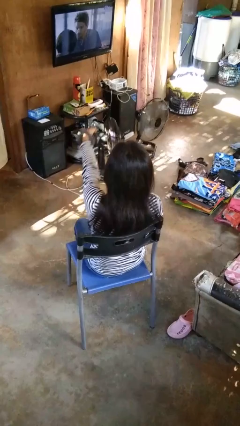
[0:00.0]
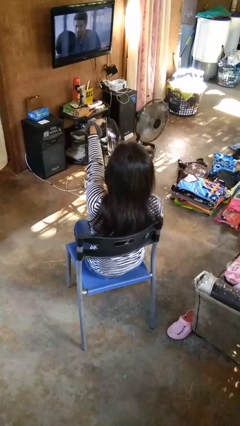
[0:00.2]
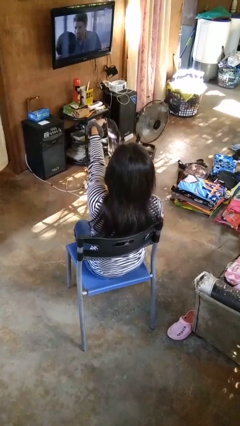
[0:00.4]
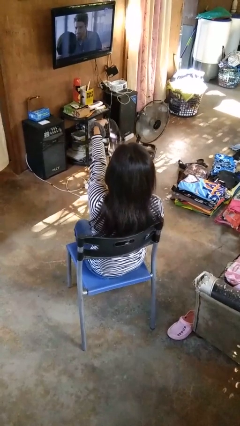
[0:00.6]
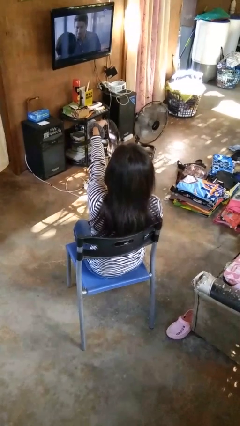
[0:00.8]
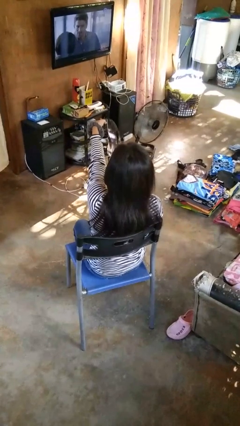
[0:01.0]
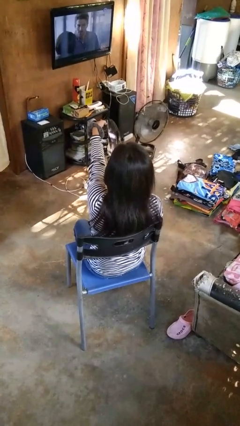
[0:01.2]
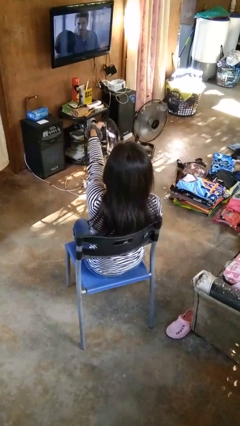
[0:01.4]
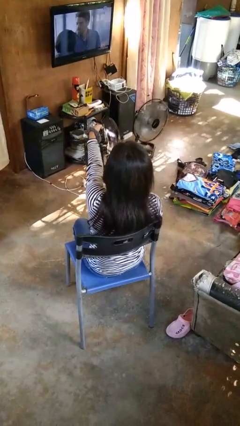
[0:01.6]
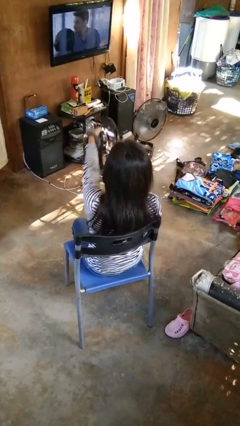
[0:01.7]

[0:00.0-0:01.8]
person uses television remote

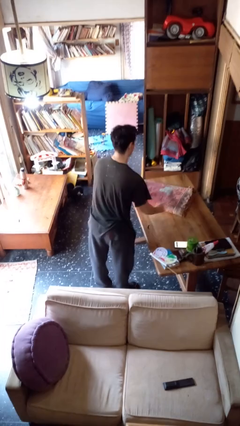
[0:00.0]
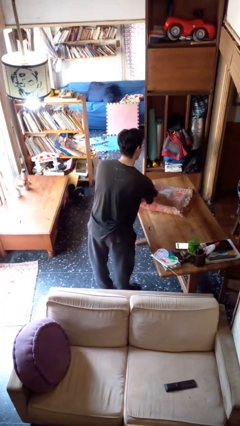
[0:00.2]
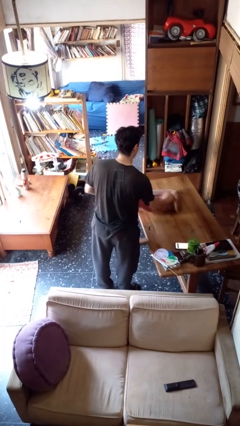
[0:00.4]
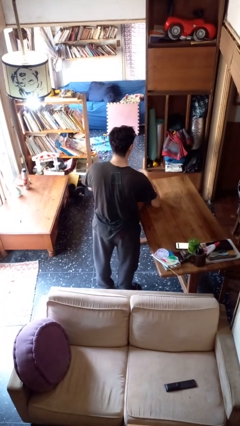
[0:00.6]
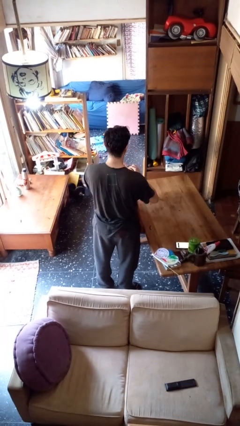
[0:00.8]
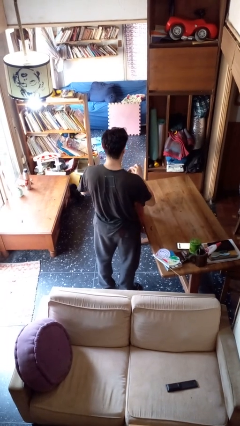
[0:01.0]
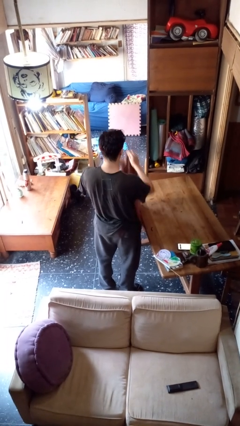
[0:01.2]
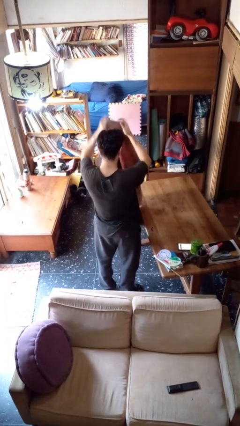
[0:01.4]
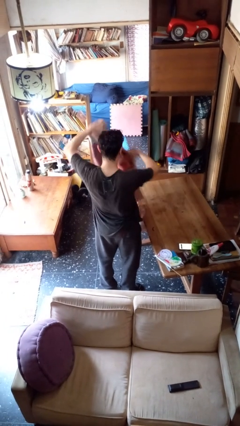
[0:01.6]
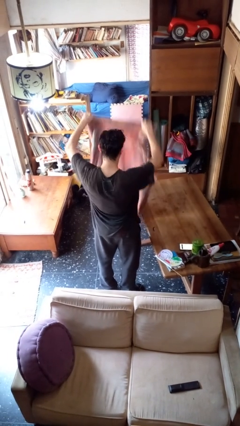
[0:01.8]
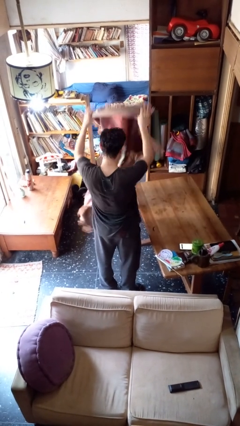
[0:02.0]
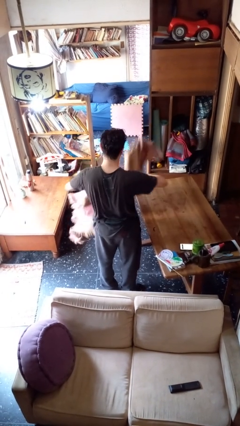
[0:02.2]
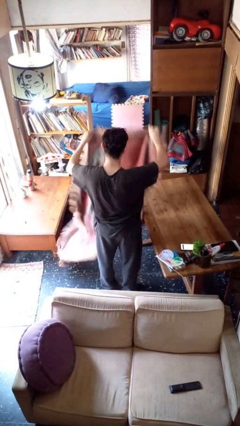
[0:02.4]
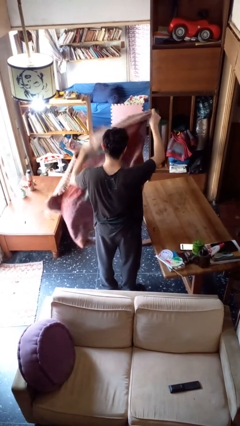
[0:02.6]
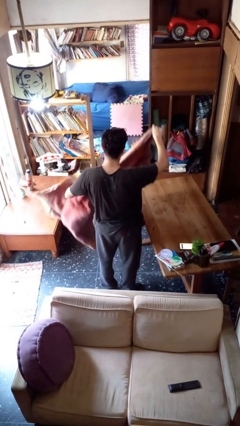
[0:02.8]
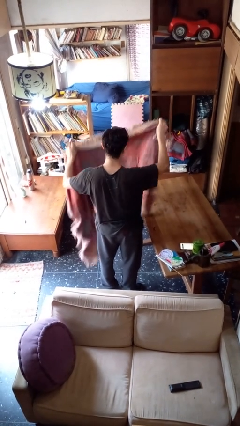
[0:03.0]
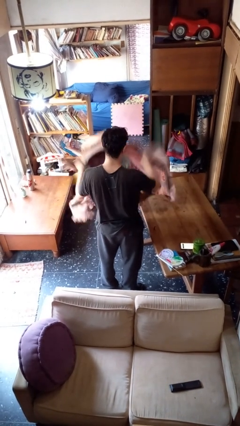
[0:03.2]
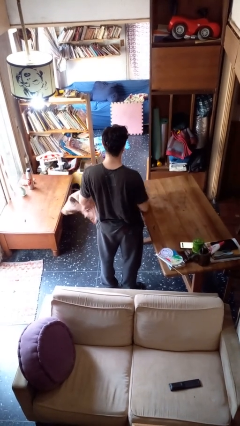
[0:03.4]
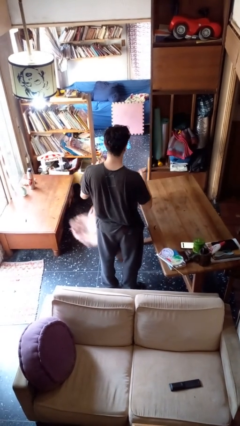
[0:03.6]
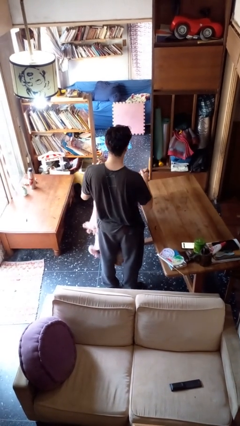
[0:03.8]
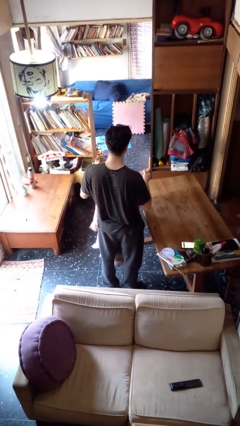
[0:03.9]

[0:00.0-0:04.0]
person unfolds blanket

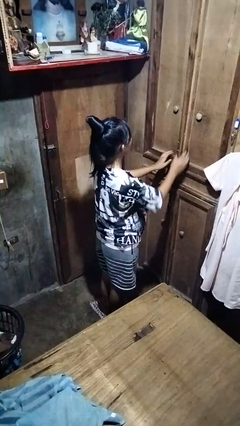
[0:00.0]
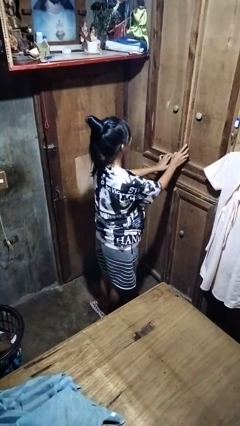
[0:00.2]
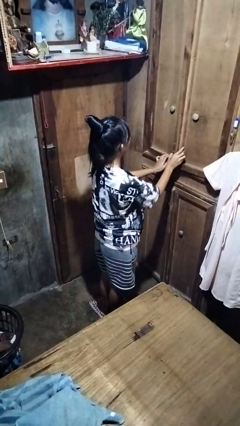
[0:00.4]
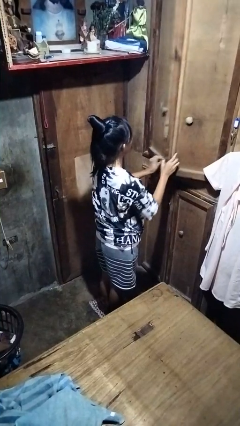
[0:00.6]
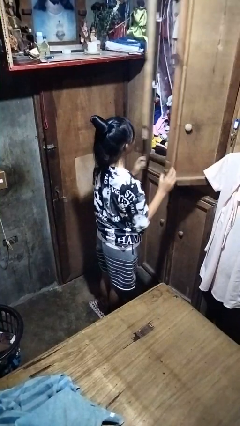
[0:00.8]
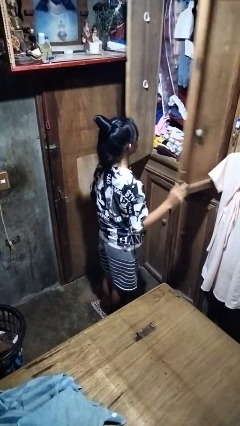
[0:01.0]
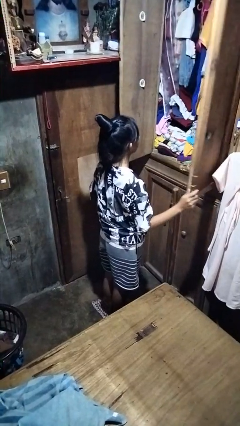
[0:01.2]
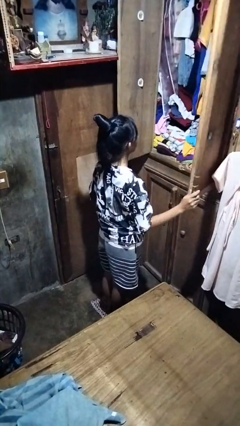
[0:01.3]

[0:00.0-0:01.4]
person opens closet door

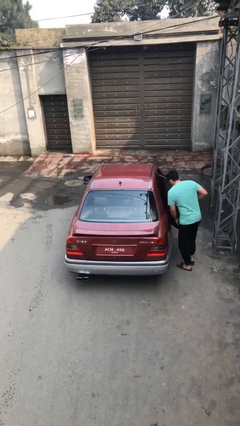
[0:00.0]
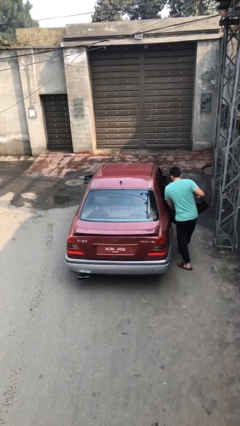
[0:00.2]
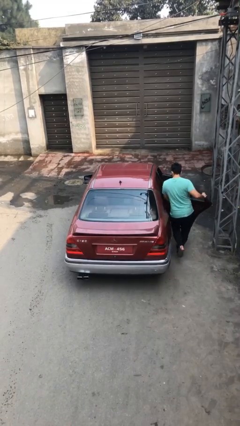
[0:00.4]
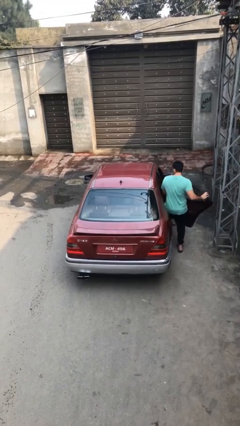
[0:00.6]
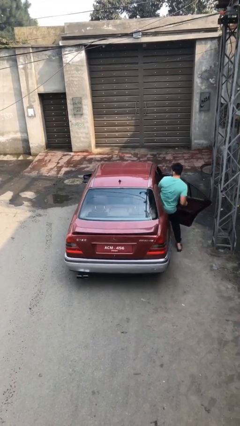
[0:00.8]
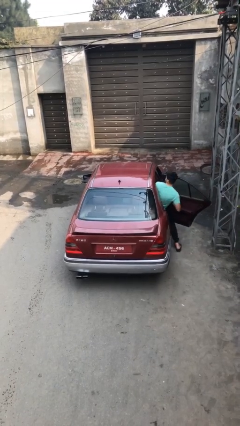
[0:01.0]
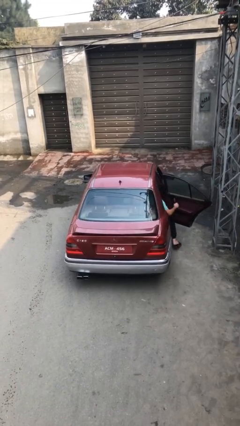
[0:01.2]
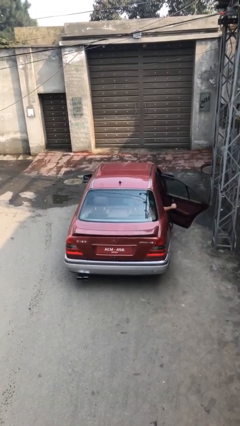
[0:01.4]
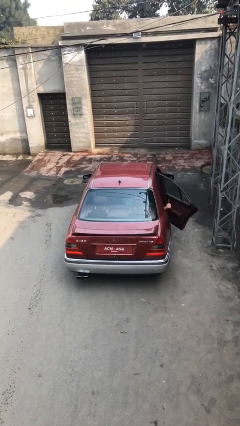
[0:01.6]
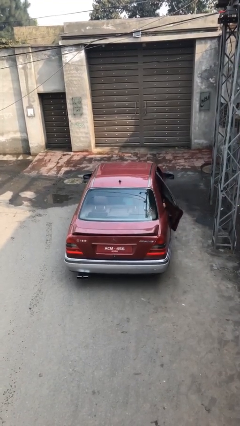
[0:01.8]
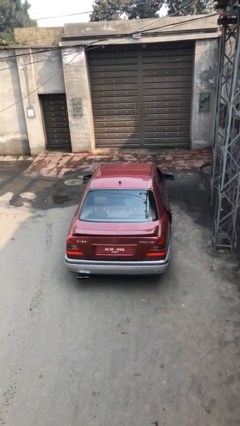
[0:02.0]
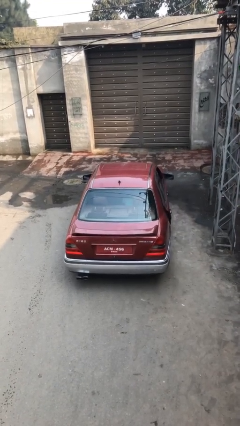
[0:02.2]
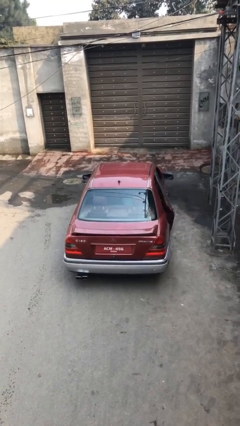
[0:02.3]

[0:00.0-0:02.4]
car picks up person

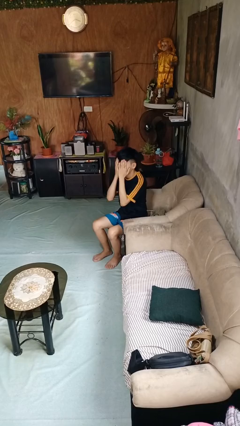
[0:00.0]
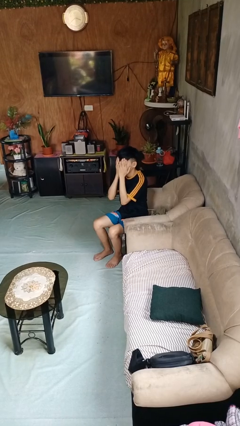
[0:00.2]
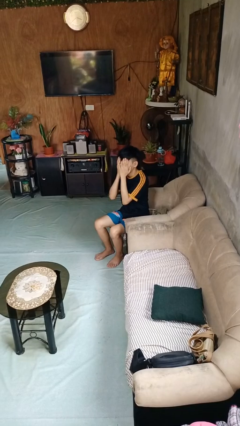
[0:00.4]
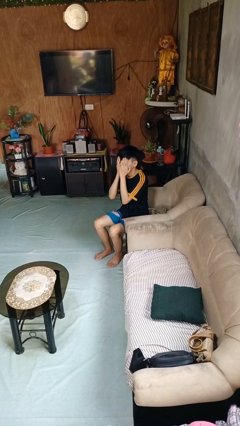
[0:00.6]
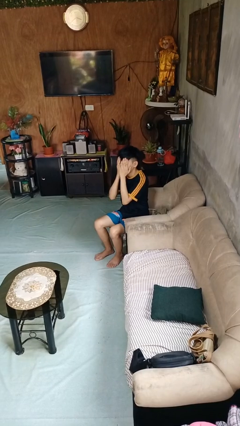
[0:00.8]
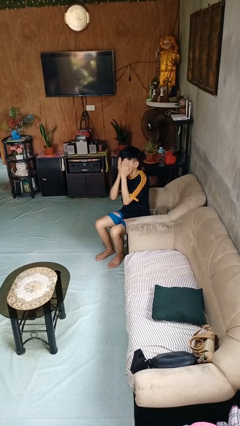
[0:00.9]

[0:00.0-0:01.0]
person covers face with hands

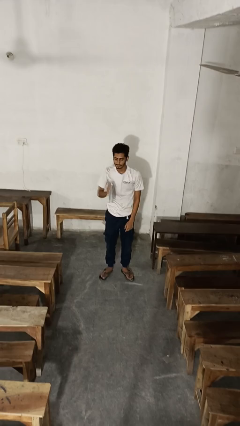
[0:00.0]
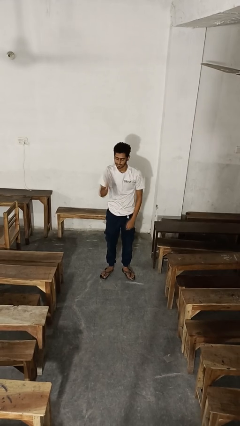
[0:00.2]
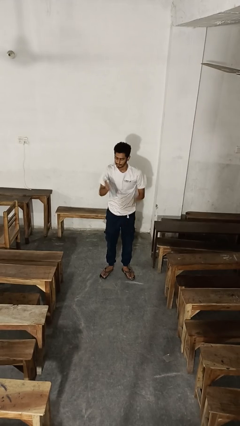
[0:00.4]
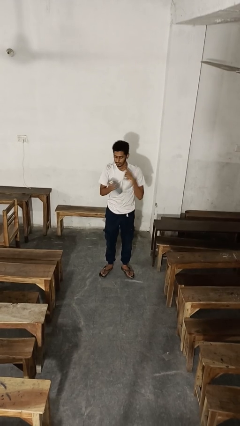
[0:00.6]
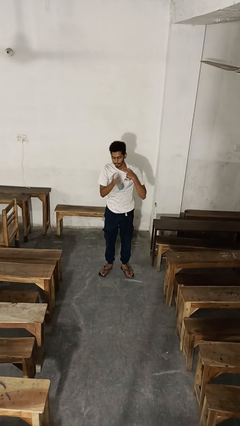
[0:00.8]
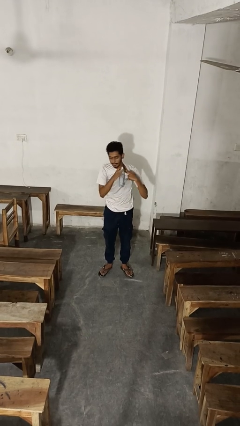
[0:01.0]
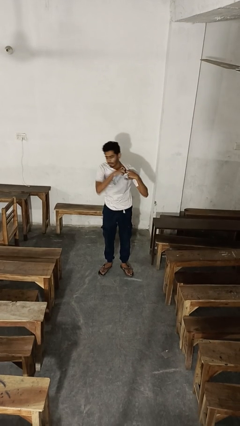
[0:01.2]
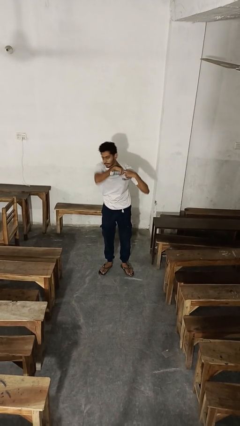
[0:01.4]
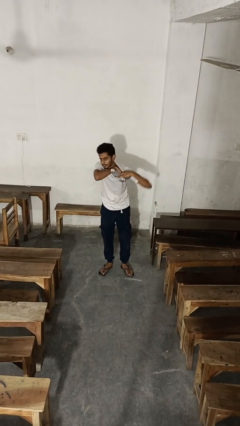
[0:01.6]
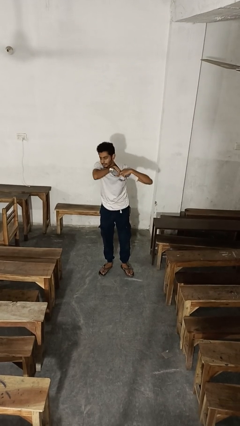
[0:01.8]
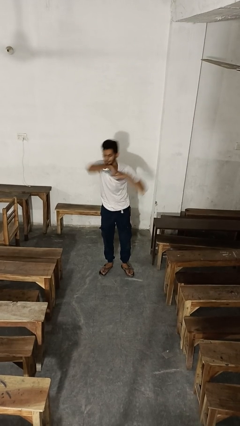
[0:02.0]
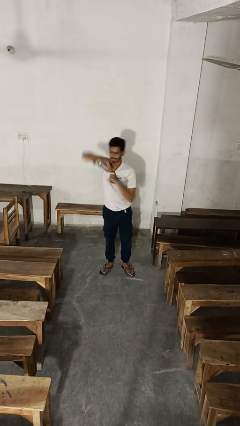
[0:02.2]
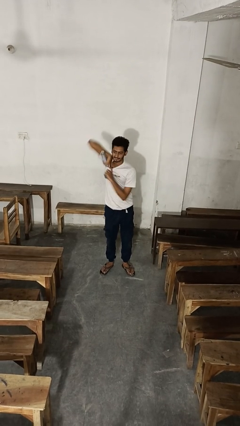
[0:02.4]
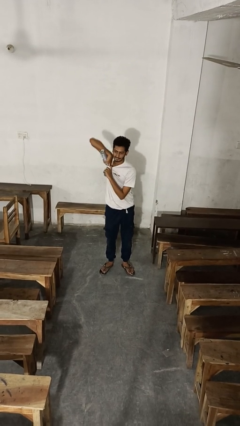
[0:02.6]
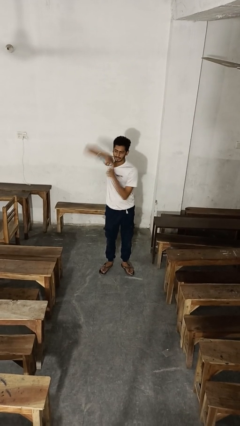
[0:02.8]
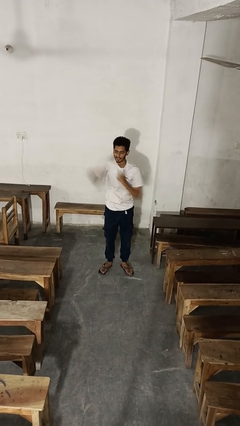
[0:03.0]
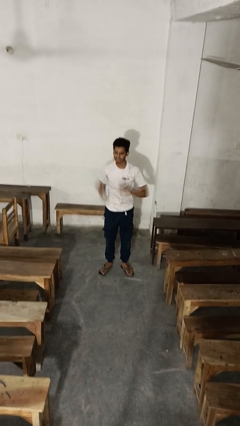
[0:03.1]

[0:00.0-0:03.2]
person applies deodorant

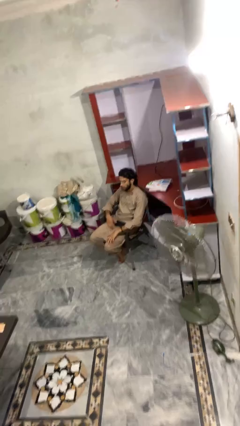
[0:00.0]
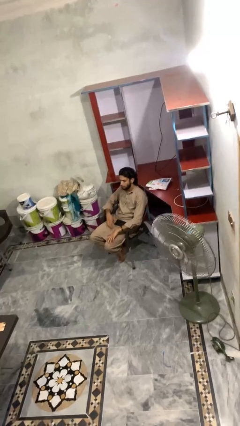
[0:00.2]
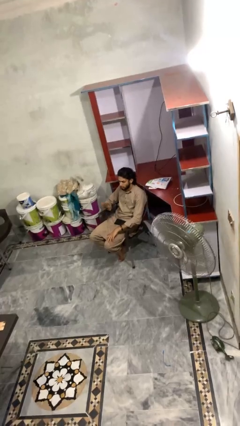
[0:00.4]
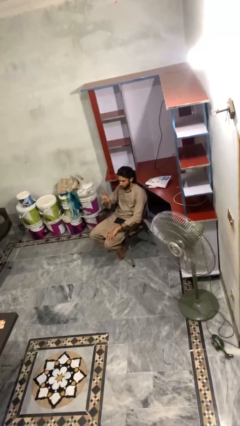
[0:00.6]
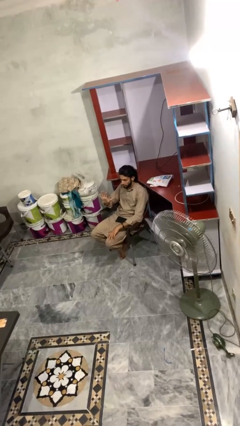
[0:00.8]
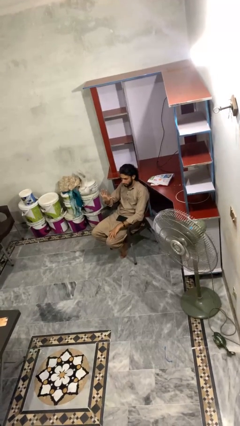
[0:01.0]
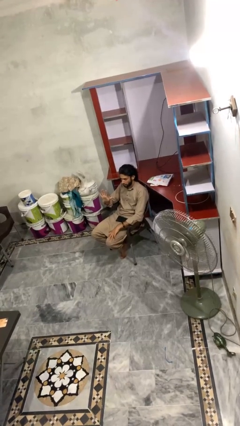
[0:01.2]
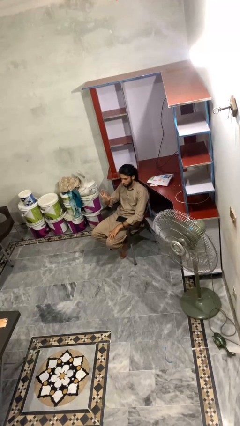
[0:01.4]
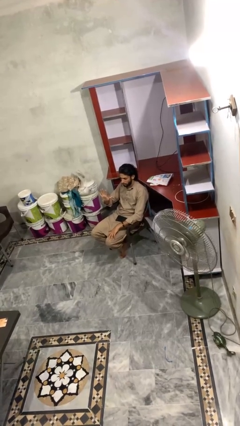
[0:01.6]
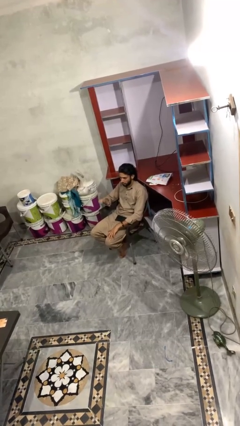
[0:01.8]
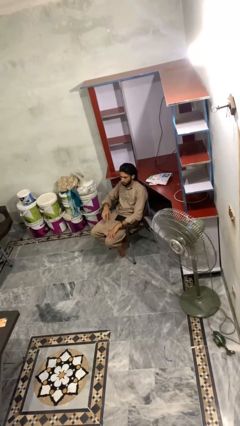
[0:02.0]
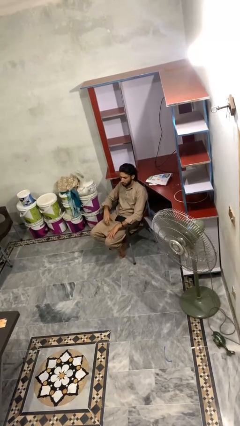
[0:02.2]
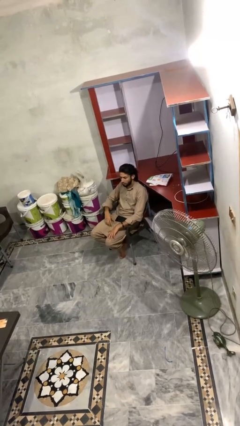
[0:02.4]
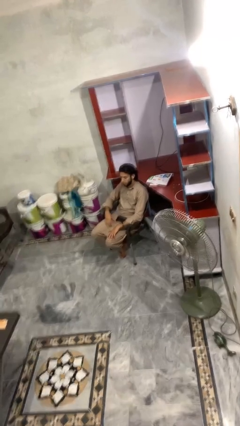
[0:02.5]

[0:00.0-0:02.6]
person gestures number five

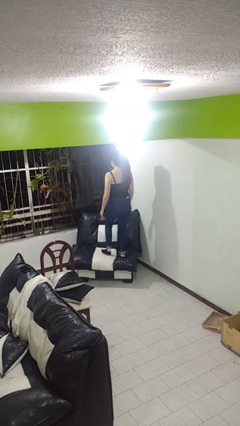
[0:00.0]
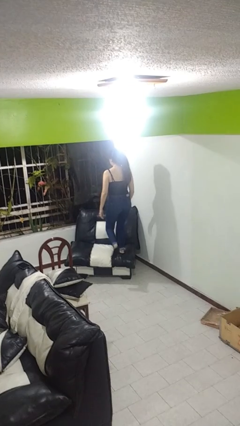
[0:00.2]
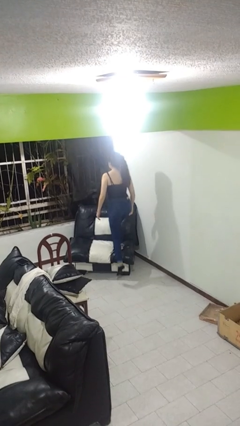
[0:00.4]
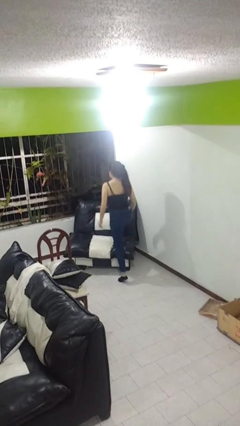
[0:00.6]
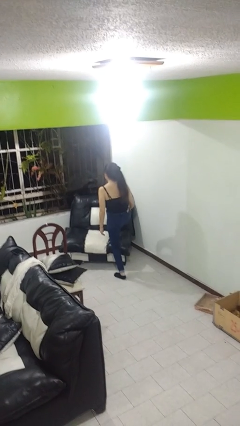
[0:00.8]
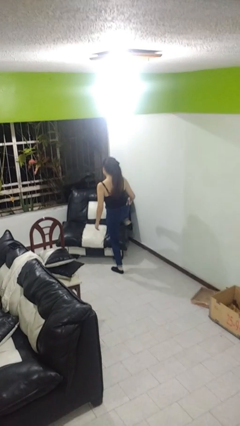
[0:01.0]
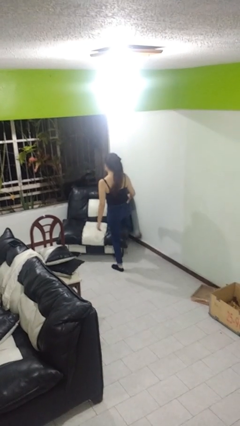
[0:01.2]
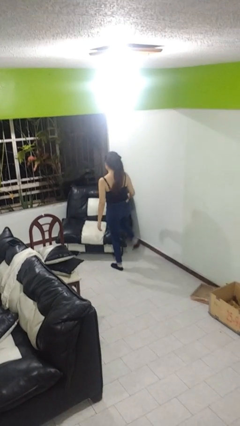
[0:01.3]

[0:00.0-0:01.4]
person climbs off couch
